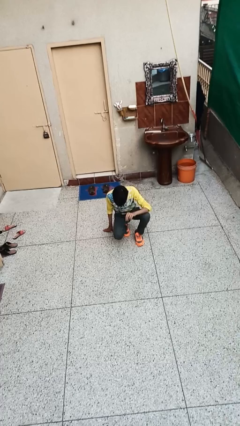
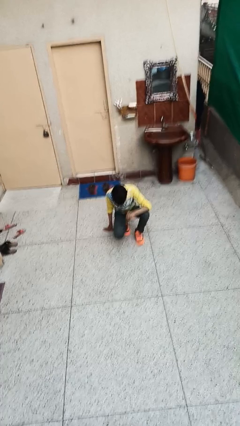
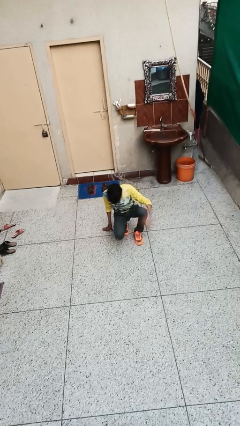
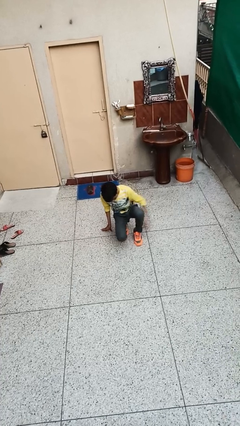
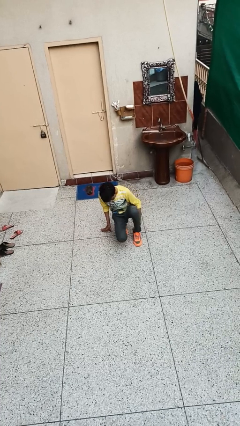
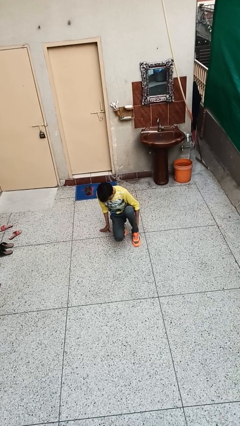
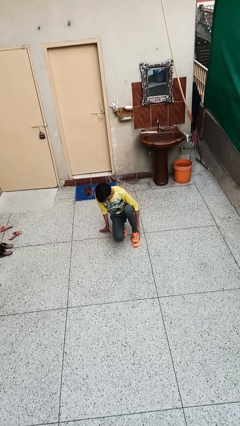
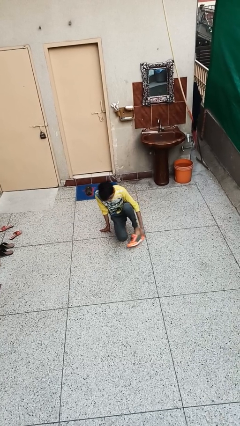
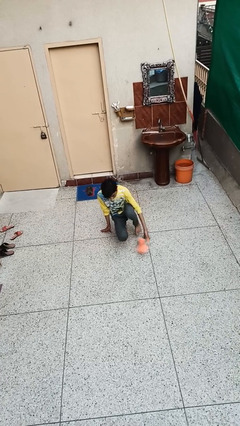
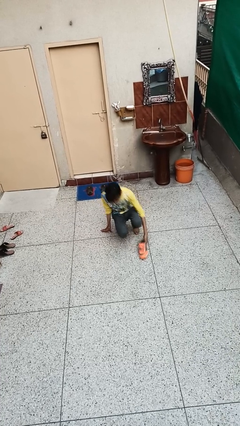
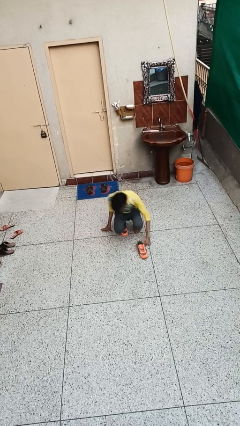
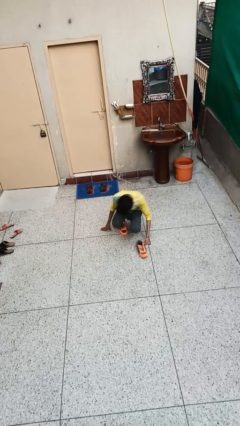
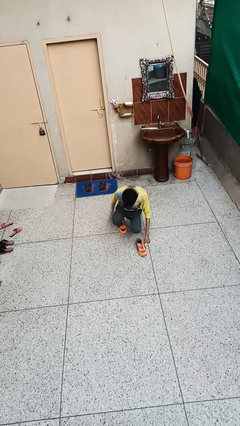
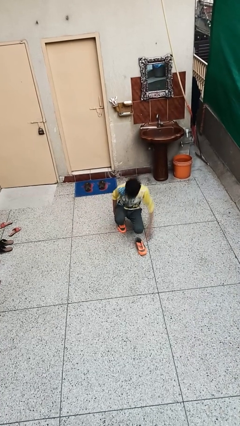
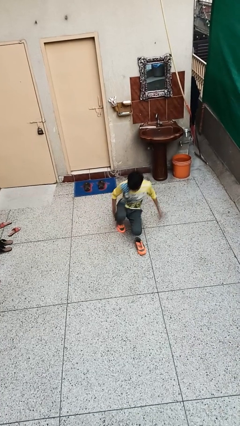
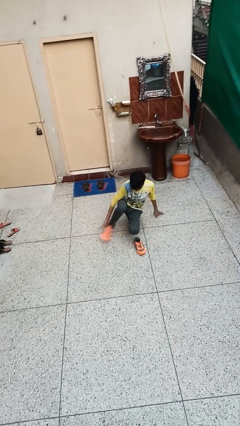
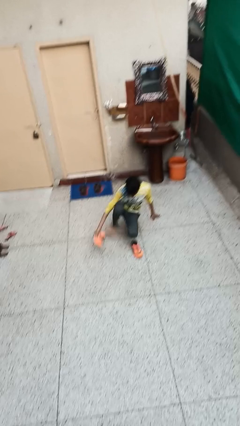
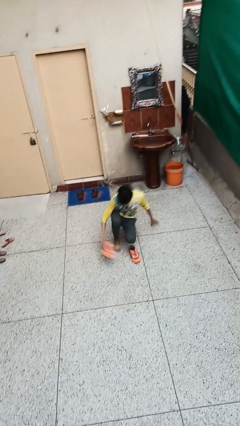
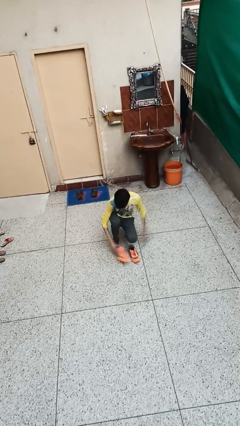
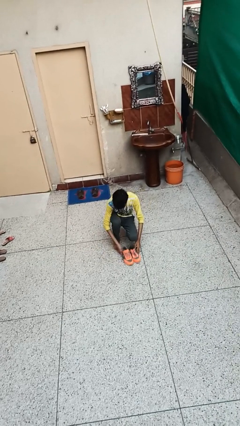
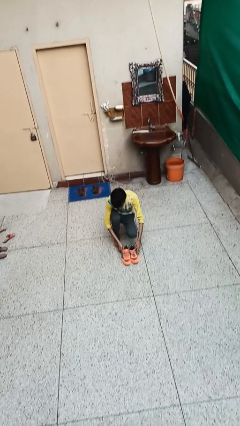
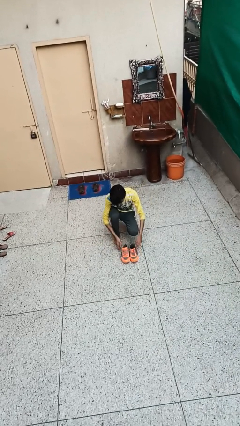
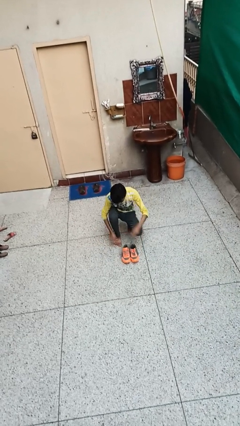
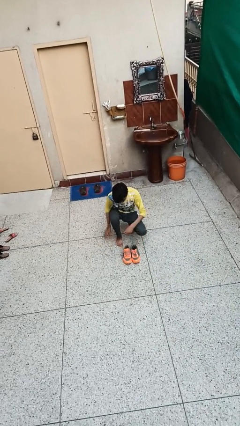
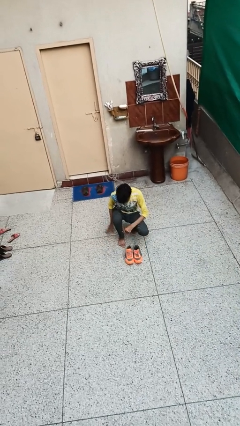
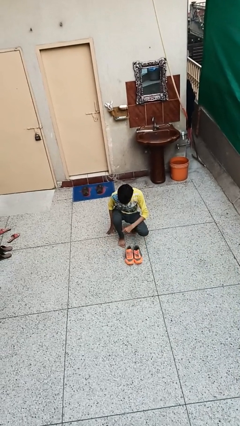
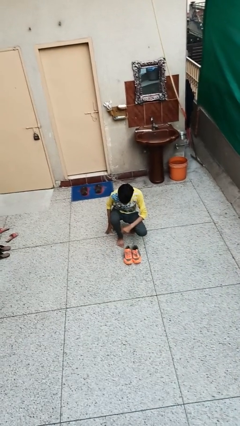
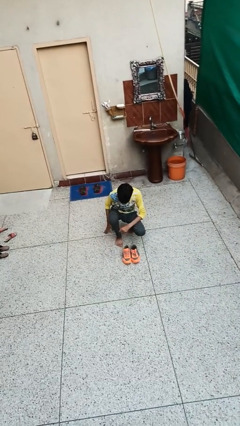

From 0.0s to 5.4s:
person takes off shoes

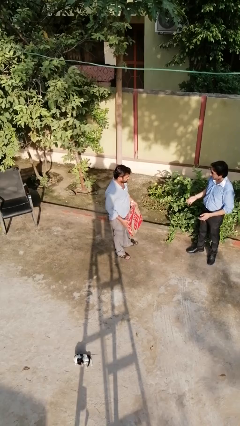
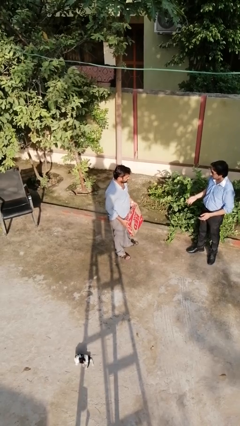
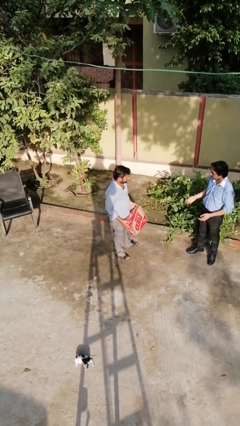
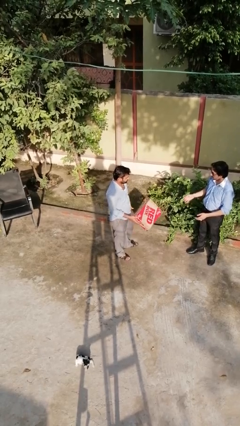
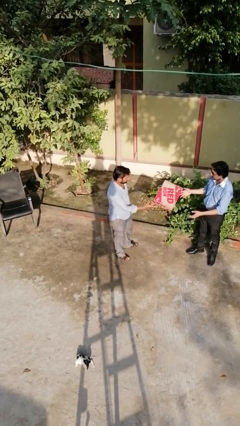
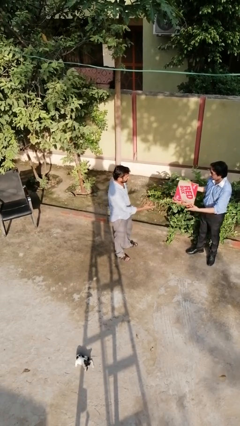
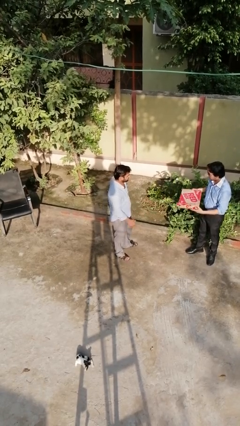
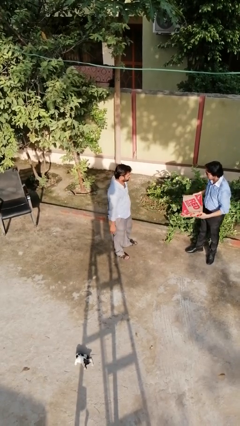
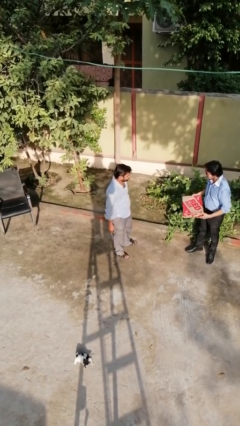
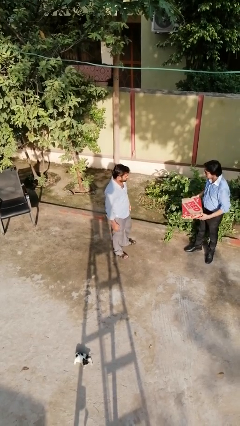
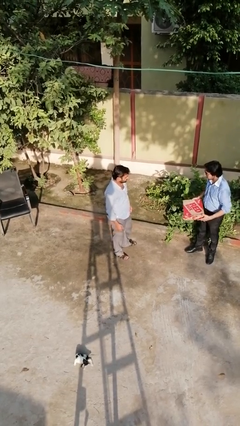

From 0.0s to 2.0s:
person throws object to person

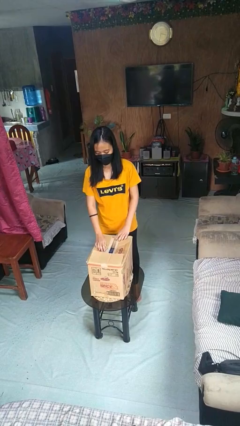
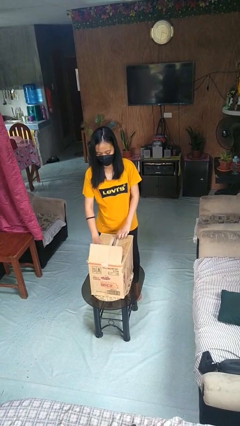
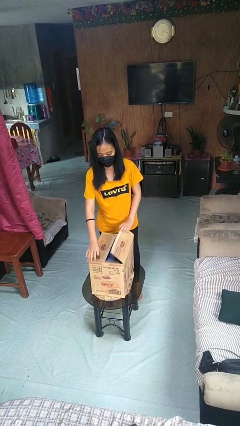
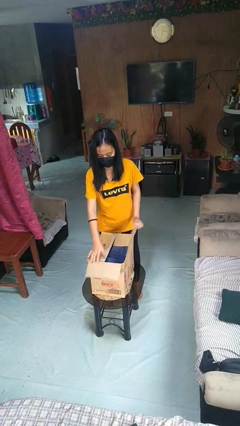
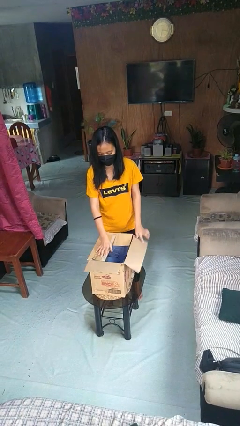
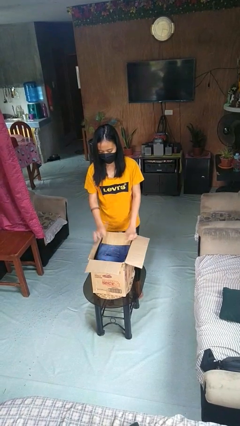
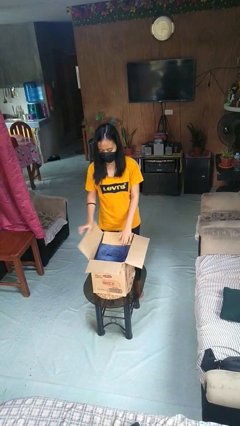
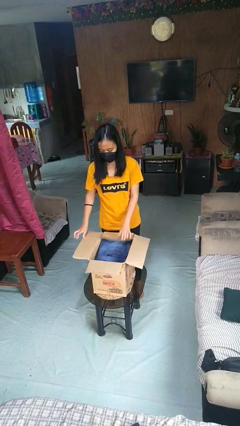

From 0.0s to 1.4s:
person opens box

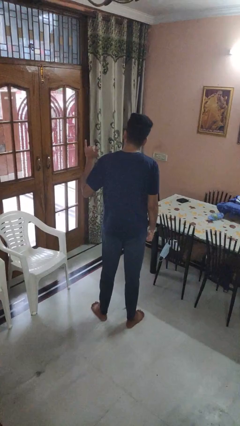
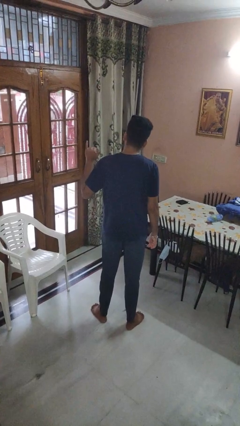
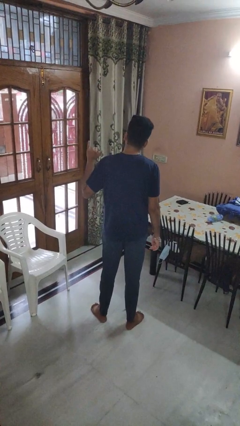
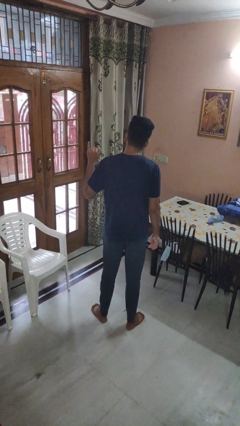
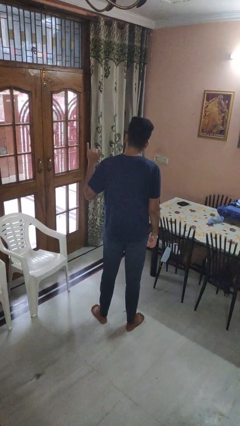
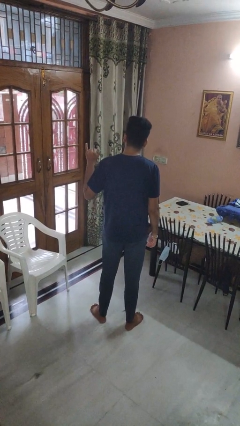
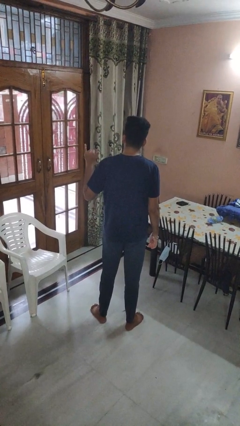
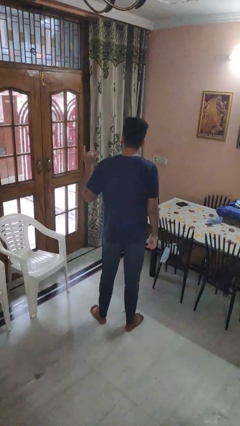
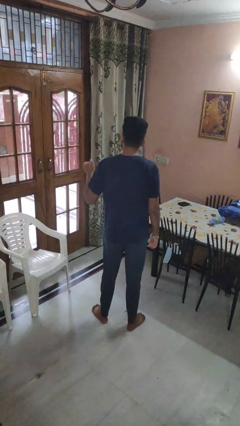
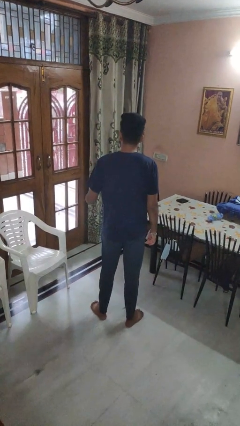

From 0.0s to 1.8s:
person gestures hang loose

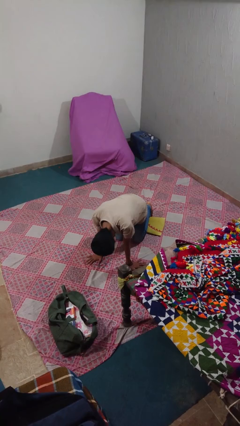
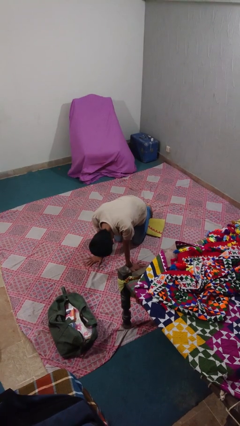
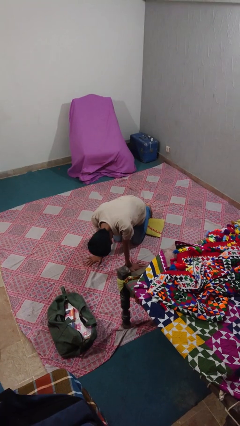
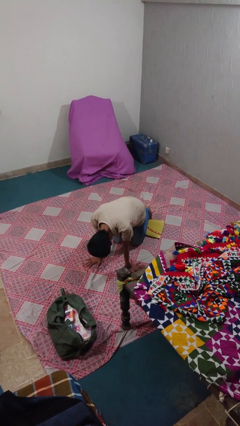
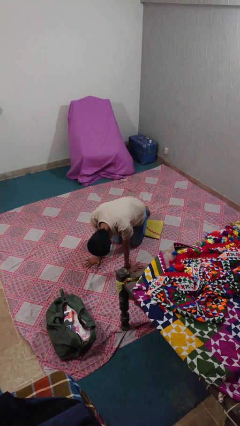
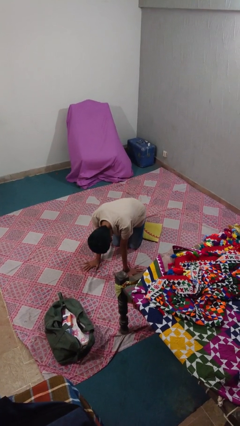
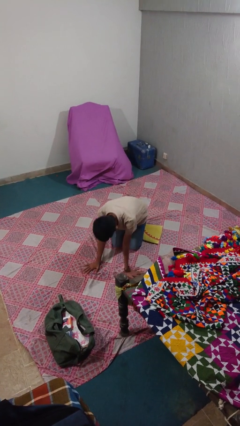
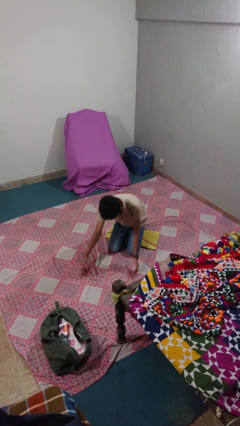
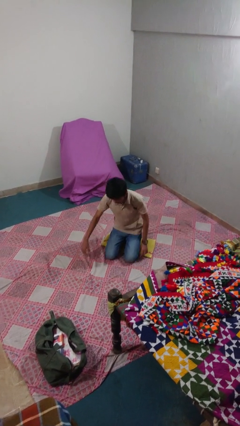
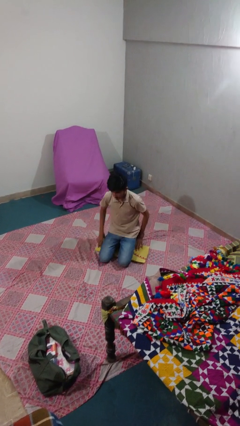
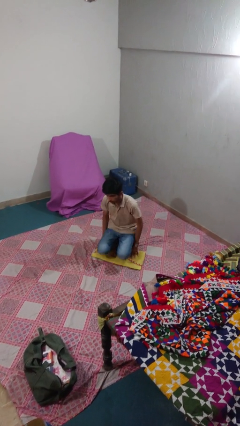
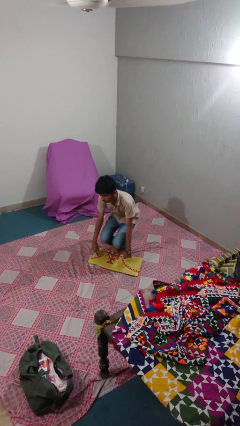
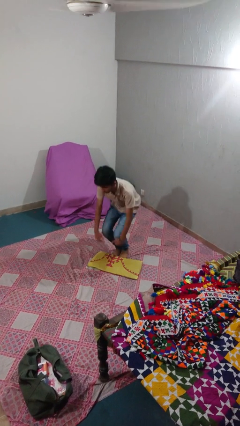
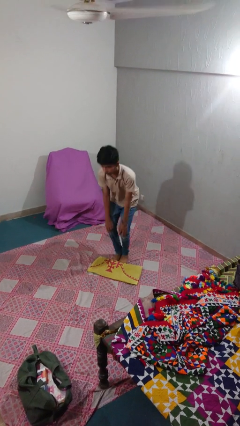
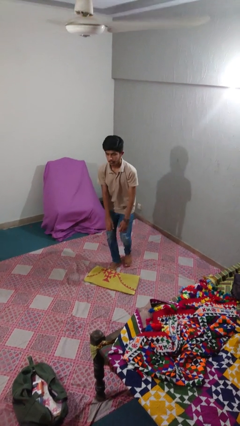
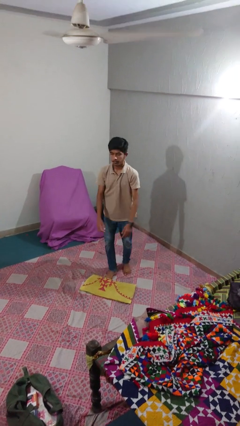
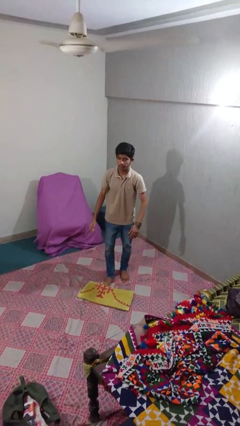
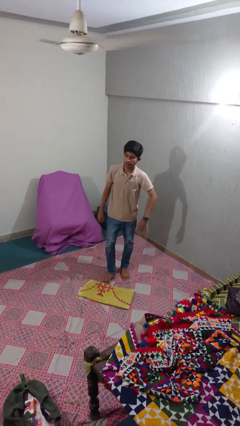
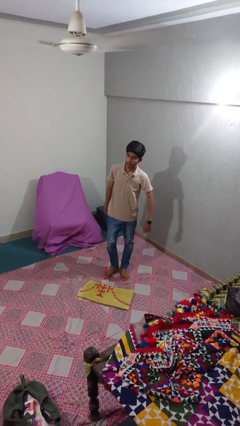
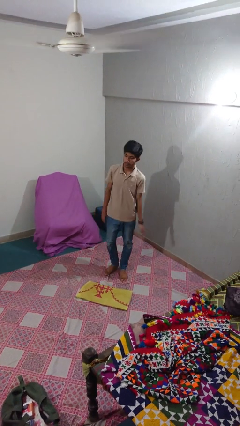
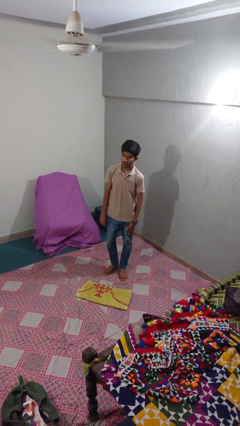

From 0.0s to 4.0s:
person stands up from floor

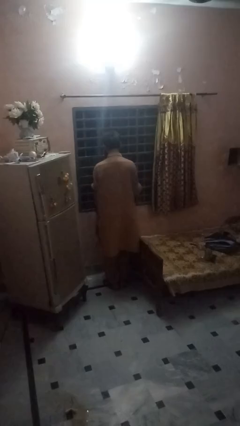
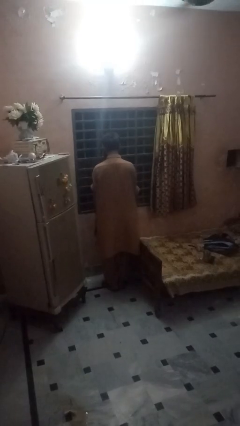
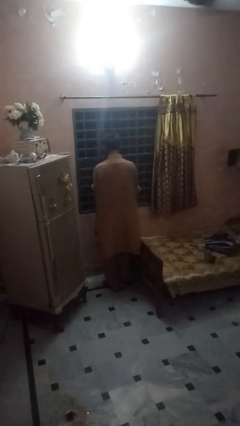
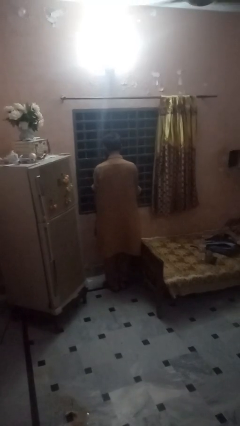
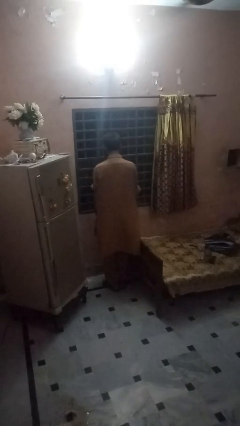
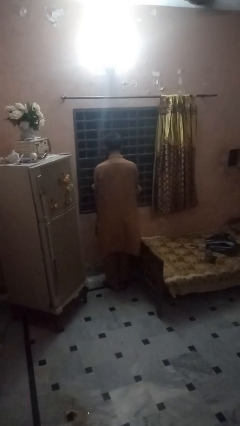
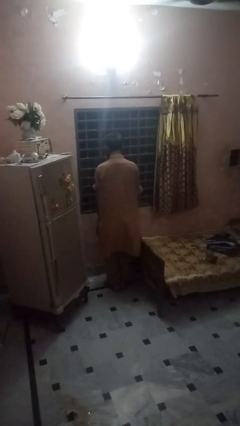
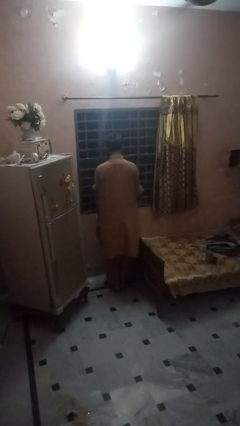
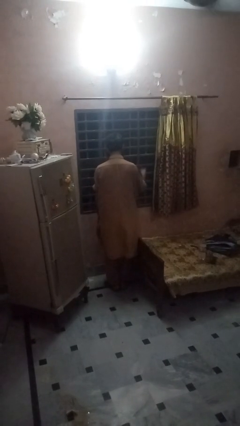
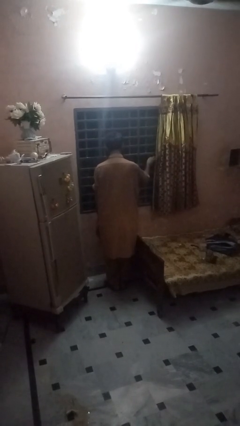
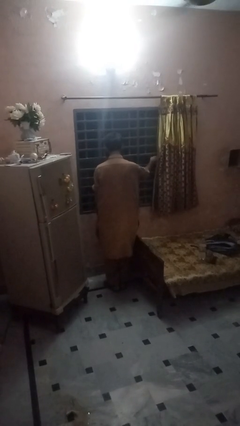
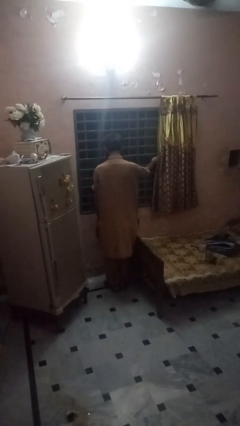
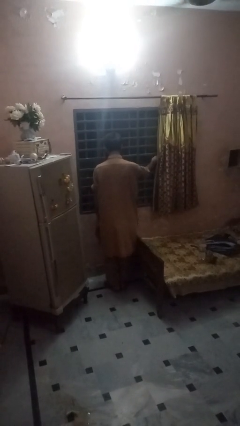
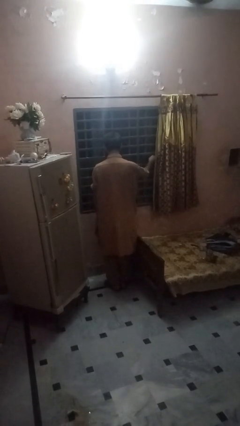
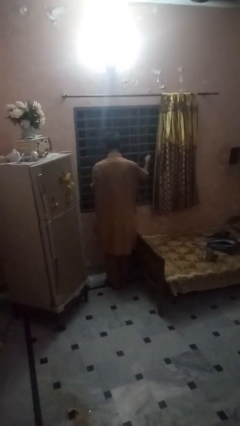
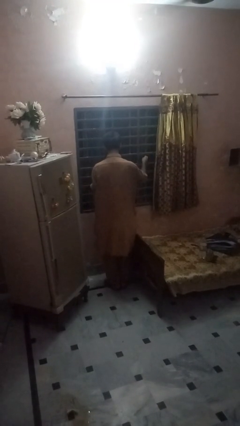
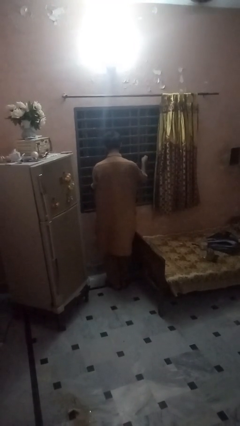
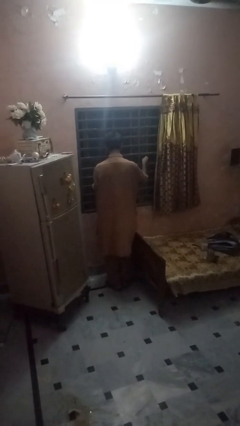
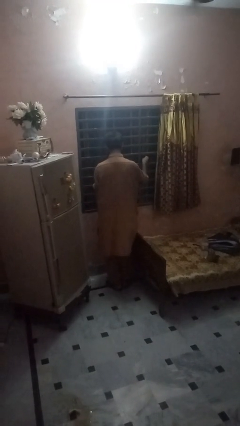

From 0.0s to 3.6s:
person closes home window
